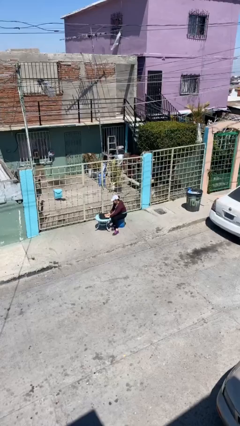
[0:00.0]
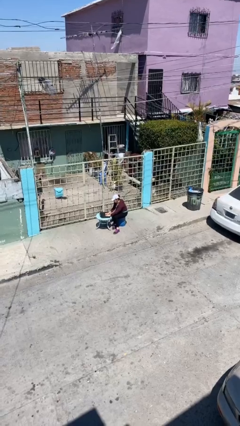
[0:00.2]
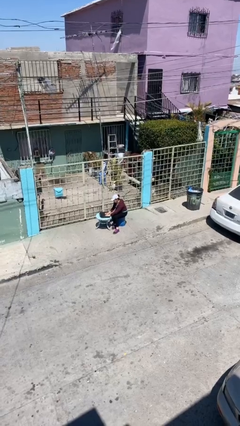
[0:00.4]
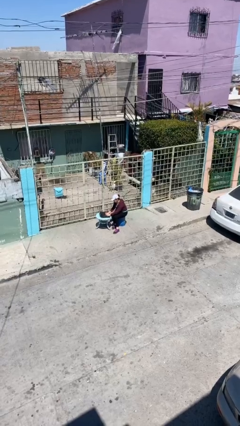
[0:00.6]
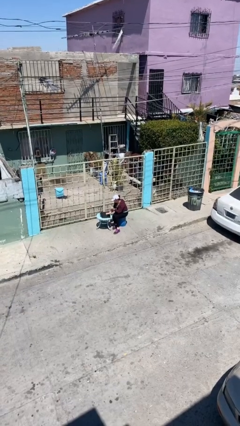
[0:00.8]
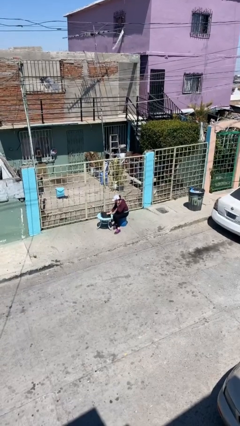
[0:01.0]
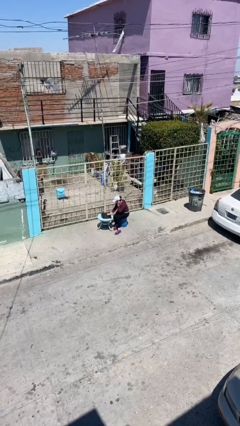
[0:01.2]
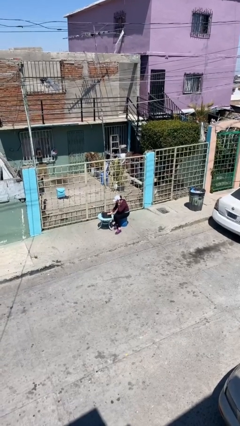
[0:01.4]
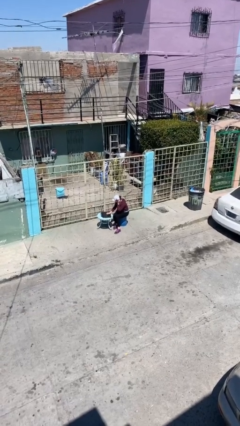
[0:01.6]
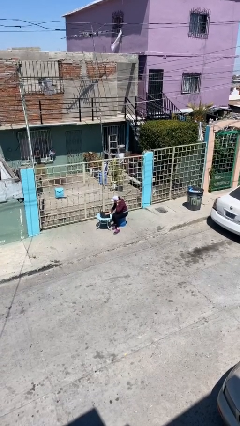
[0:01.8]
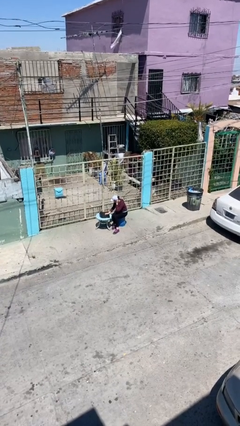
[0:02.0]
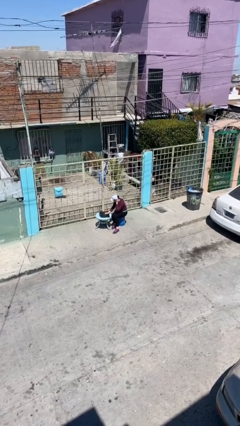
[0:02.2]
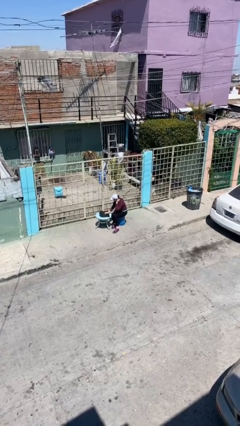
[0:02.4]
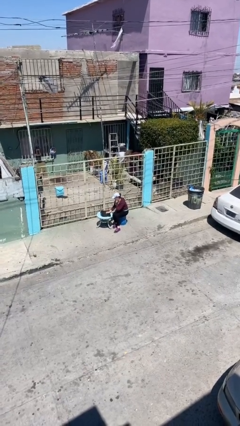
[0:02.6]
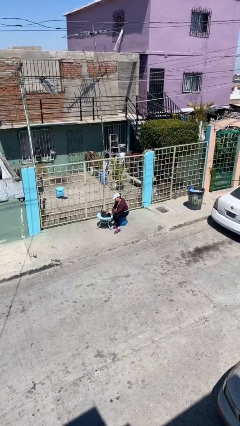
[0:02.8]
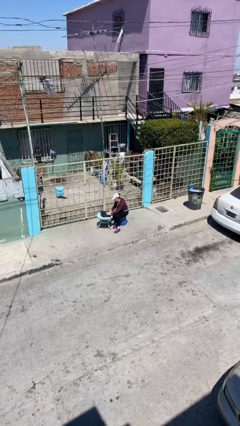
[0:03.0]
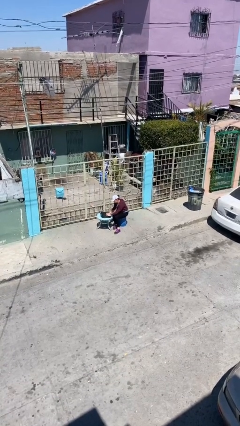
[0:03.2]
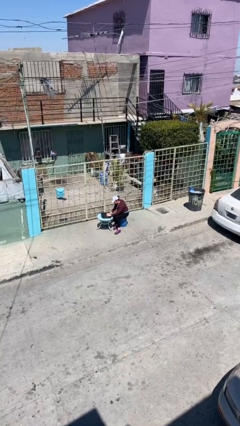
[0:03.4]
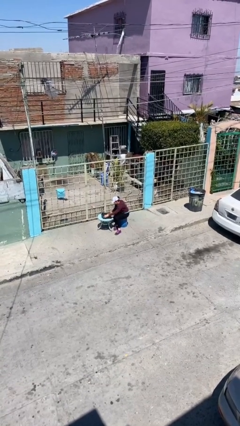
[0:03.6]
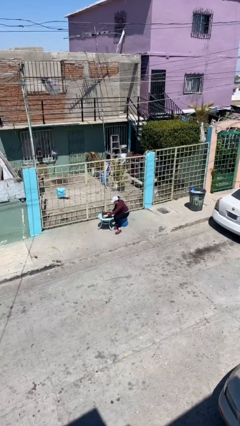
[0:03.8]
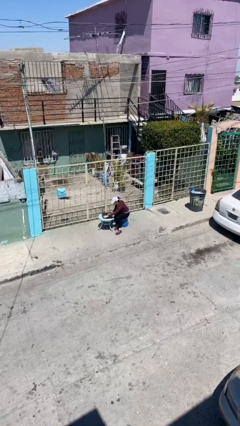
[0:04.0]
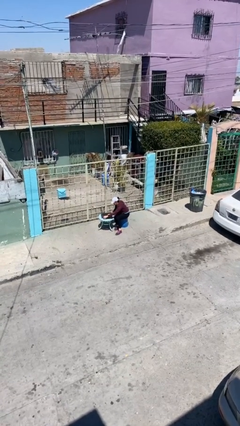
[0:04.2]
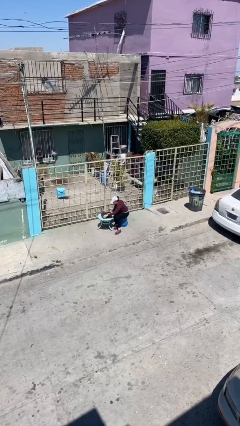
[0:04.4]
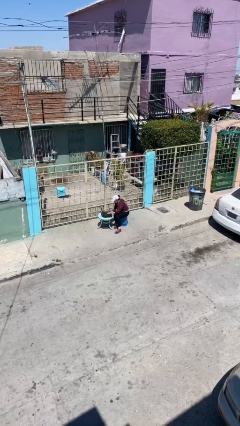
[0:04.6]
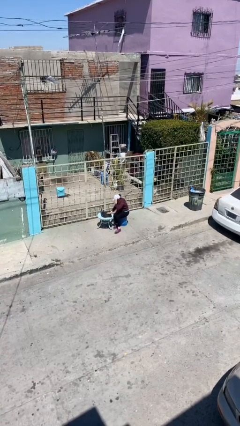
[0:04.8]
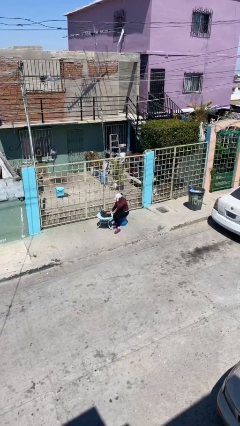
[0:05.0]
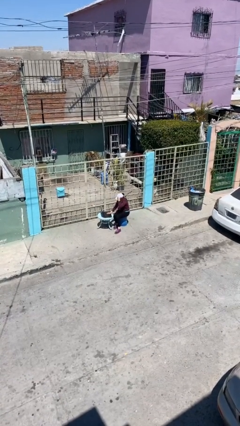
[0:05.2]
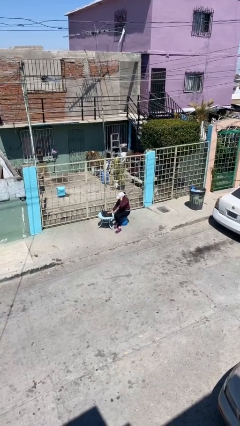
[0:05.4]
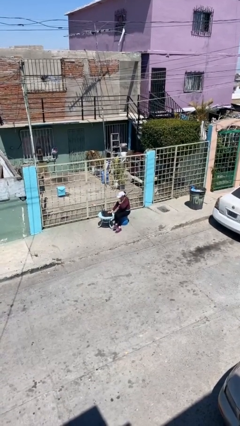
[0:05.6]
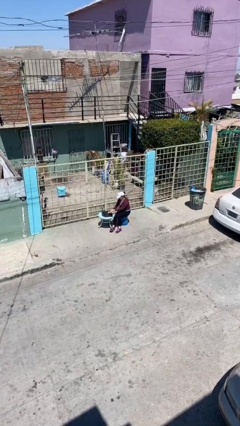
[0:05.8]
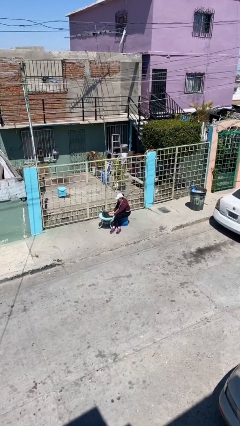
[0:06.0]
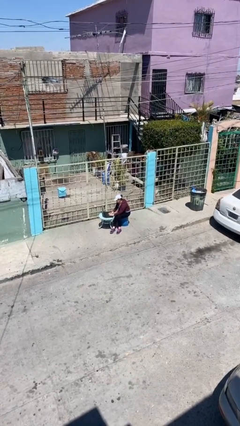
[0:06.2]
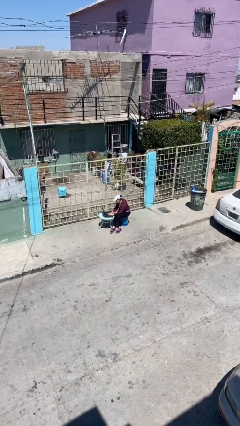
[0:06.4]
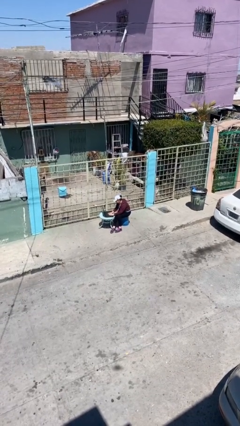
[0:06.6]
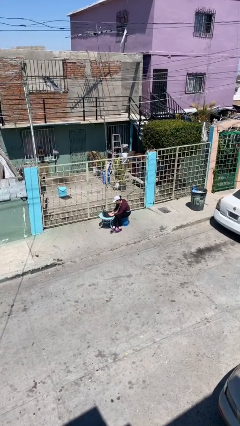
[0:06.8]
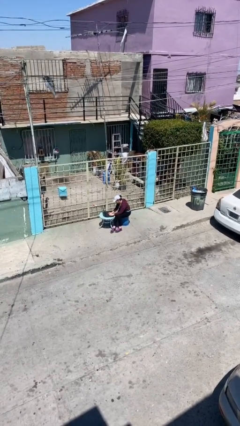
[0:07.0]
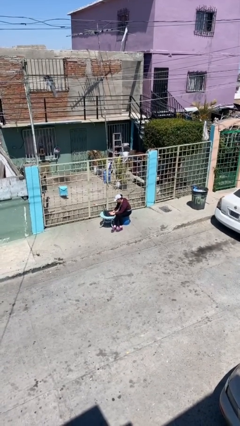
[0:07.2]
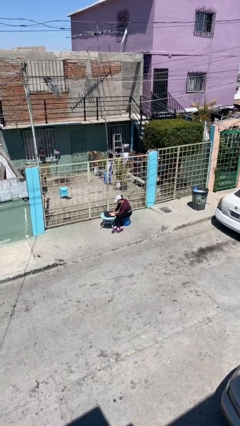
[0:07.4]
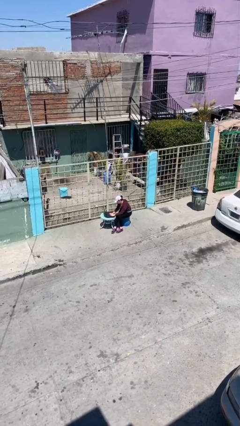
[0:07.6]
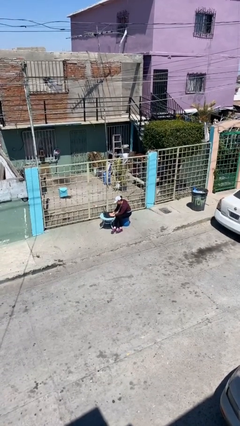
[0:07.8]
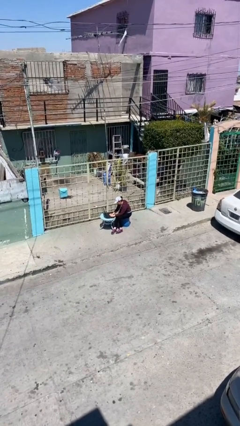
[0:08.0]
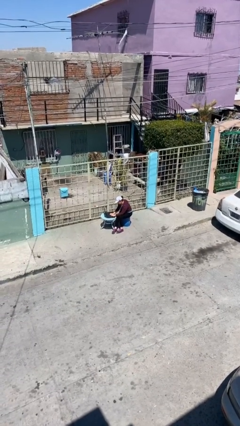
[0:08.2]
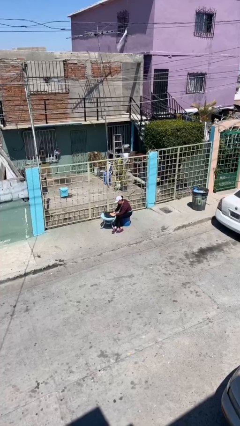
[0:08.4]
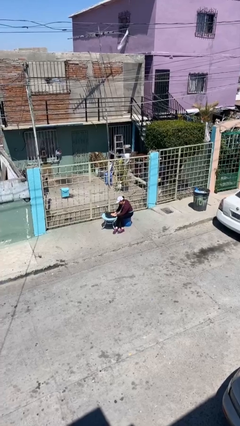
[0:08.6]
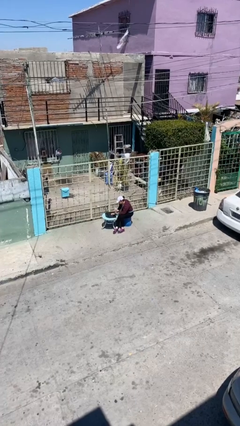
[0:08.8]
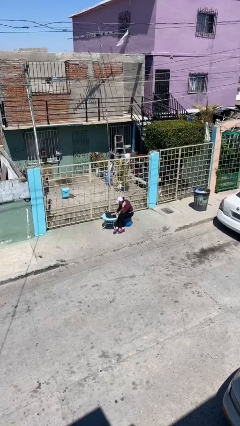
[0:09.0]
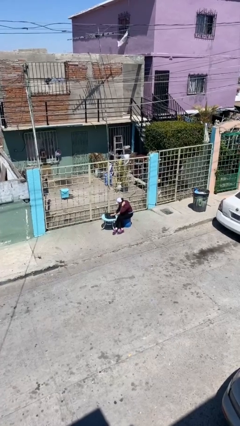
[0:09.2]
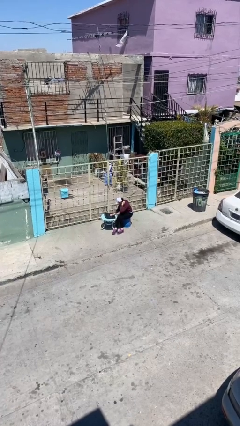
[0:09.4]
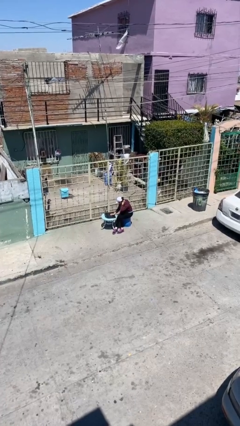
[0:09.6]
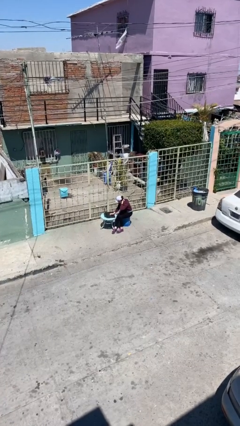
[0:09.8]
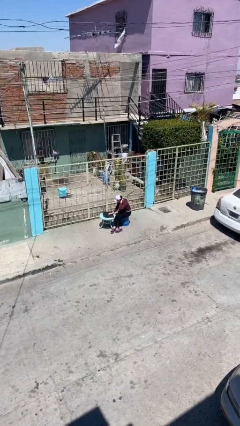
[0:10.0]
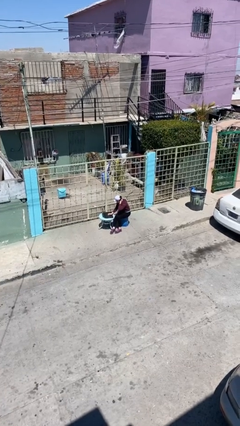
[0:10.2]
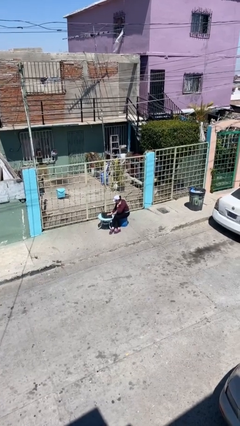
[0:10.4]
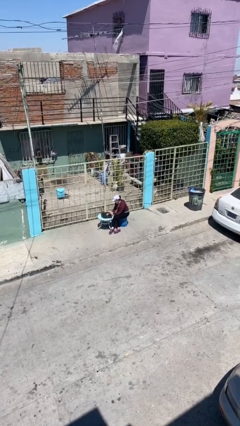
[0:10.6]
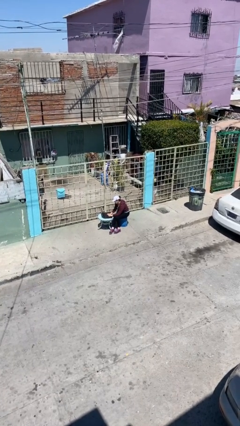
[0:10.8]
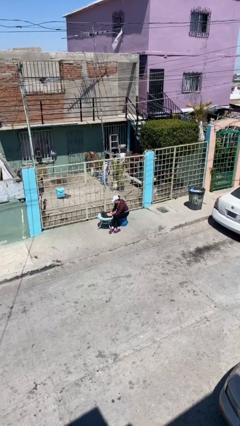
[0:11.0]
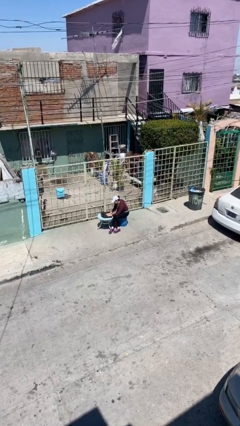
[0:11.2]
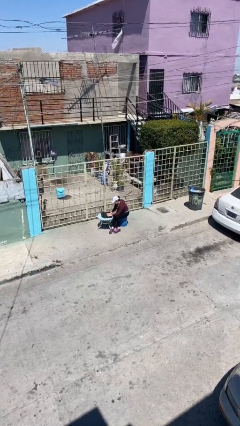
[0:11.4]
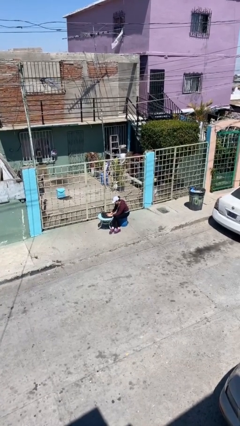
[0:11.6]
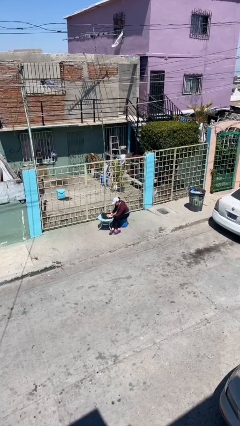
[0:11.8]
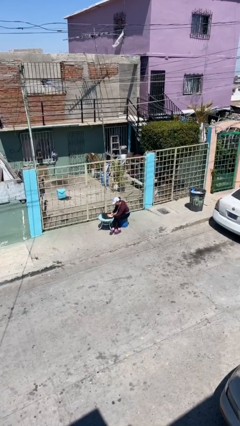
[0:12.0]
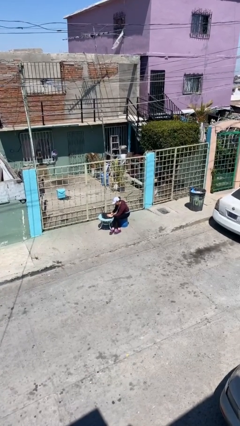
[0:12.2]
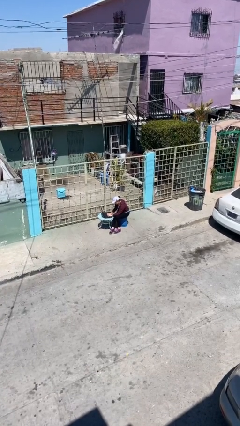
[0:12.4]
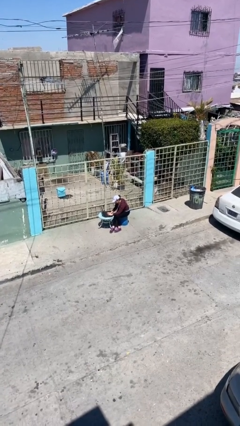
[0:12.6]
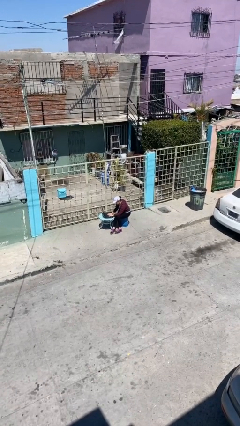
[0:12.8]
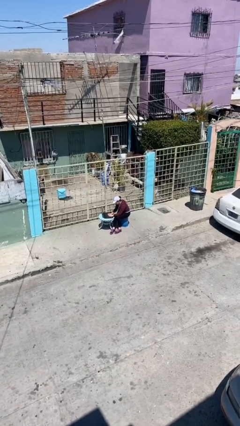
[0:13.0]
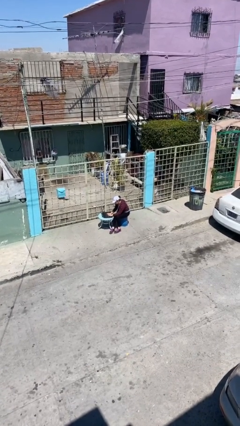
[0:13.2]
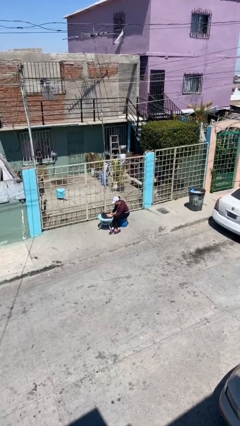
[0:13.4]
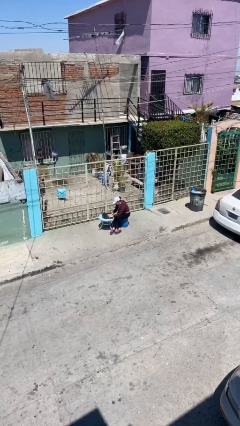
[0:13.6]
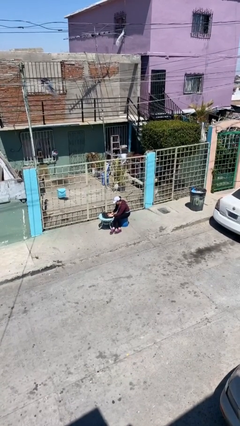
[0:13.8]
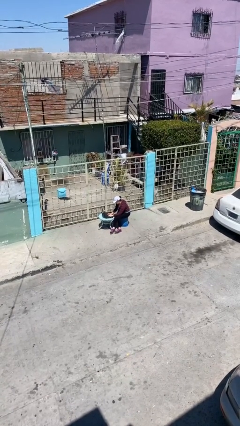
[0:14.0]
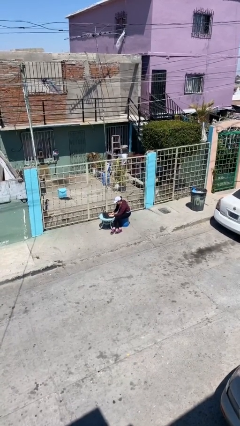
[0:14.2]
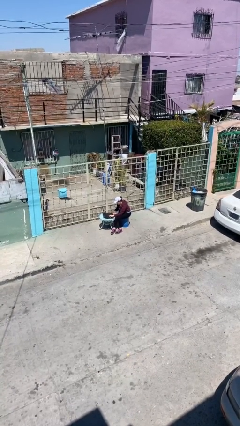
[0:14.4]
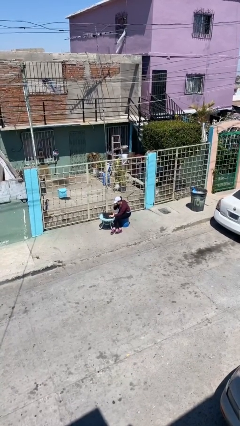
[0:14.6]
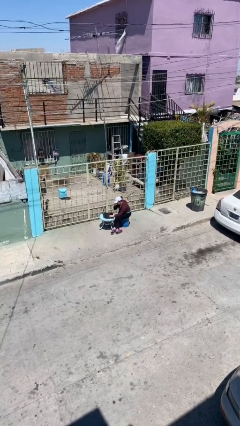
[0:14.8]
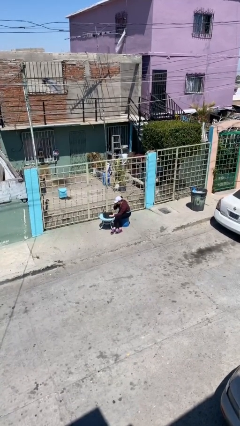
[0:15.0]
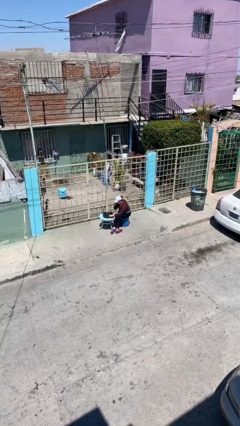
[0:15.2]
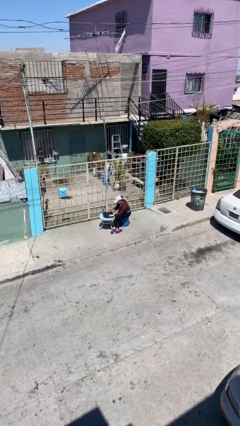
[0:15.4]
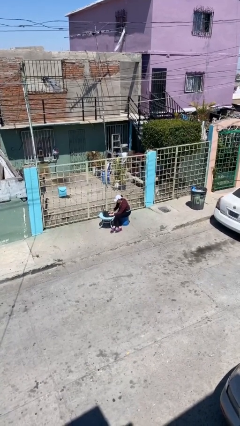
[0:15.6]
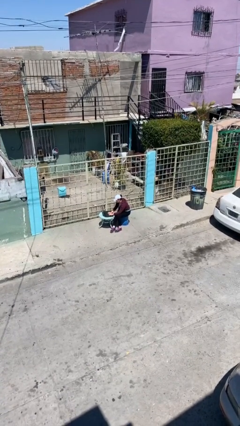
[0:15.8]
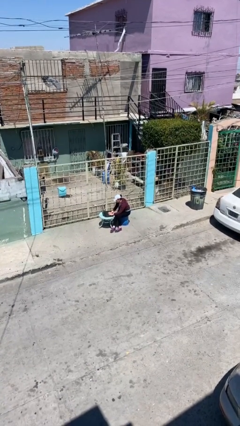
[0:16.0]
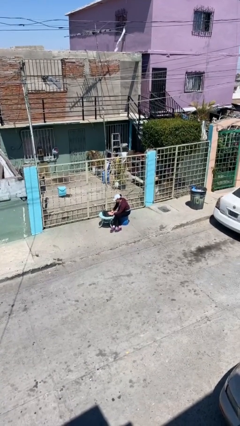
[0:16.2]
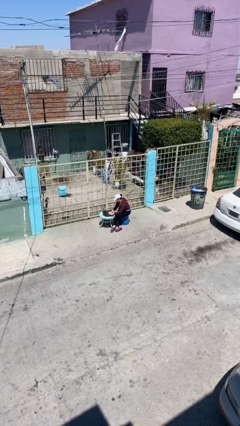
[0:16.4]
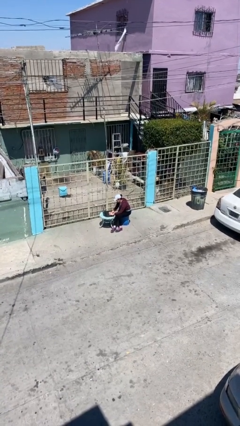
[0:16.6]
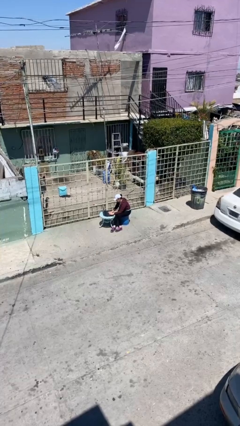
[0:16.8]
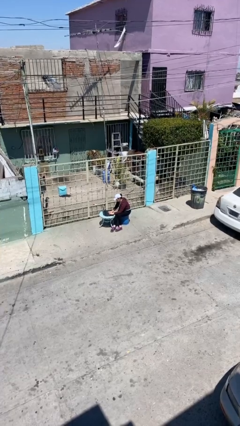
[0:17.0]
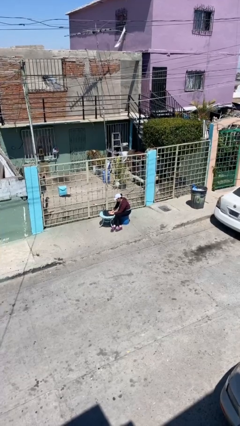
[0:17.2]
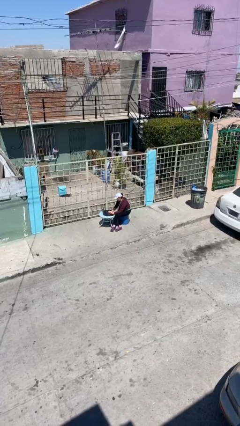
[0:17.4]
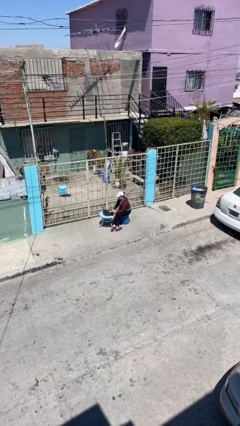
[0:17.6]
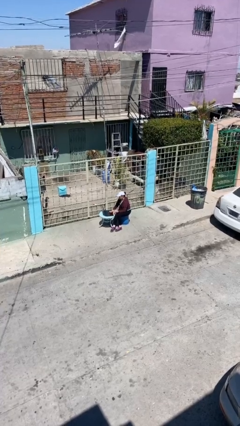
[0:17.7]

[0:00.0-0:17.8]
person interacts with laptop

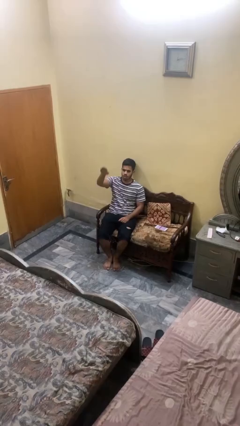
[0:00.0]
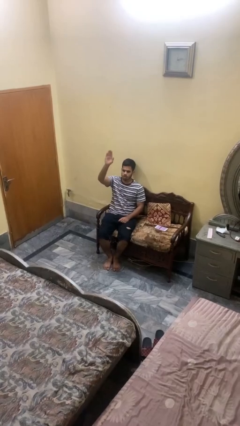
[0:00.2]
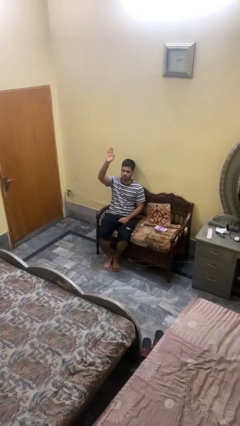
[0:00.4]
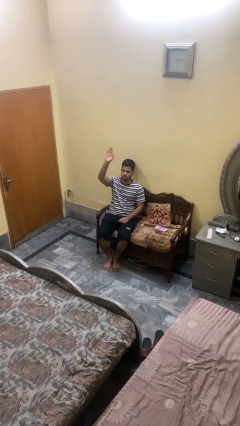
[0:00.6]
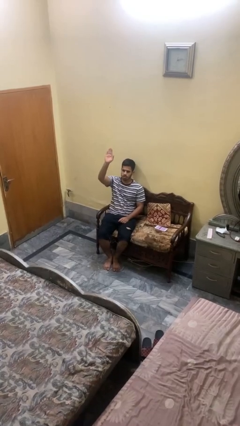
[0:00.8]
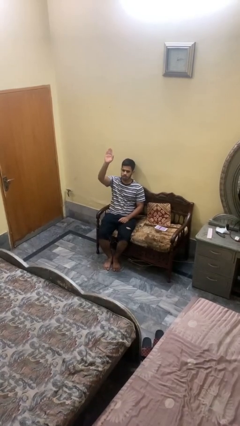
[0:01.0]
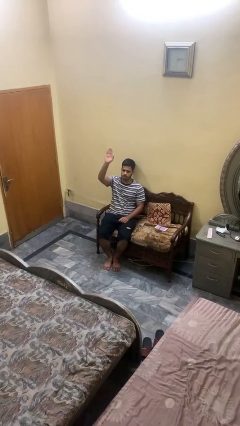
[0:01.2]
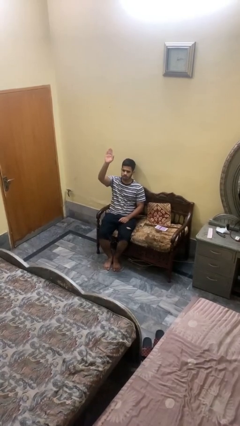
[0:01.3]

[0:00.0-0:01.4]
person gestures raise hand
